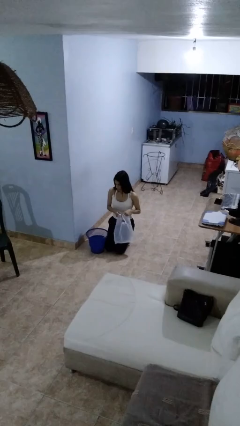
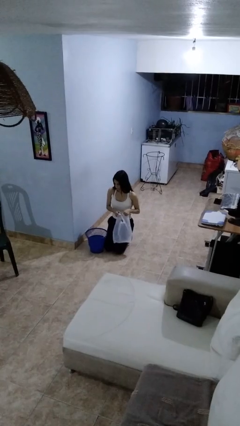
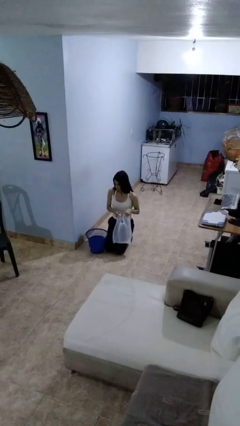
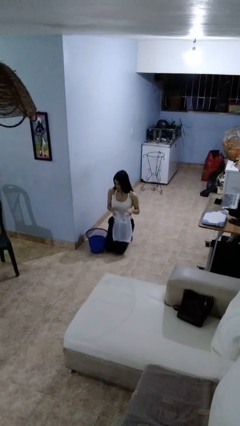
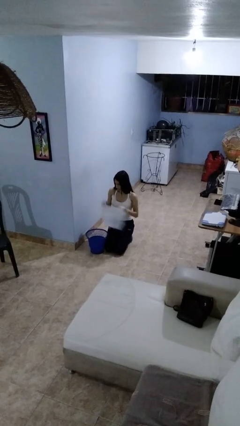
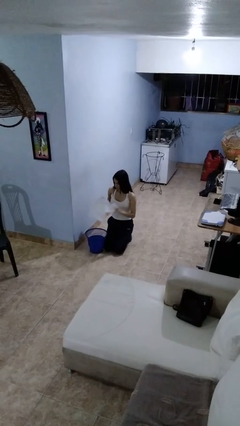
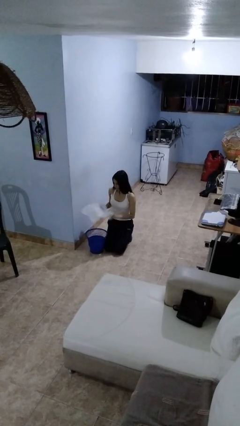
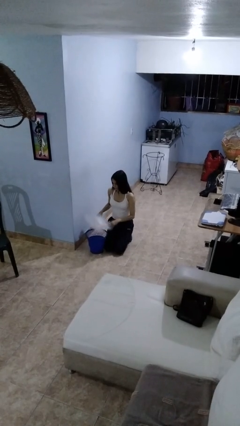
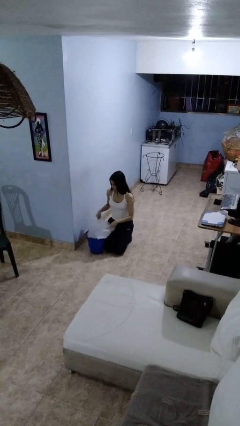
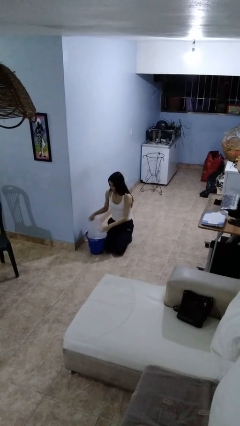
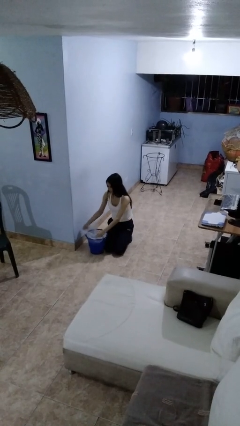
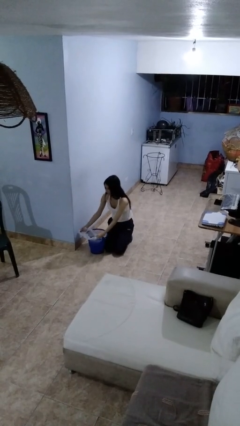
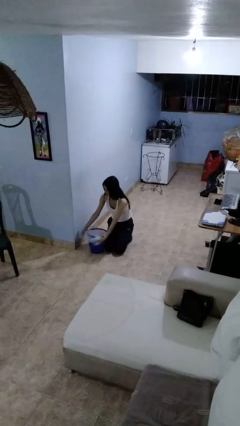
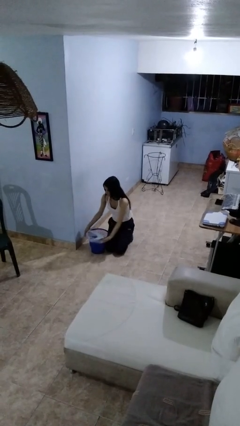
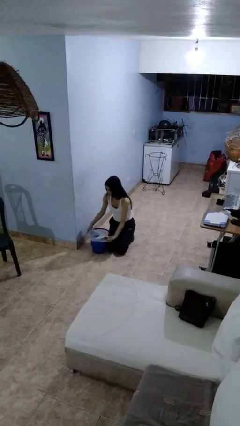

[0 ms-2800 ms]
person inserts trashbag into trashcan

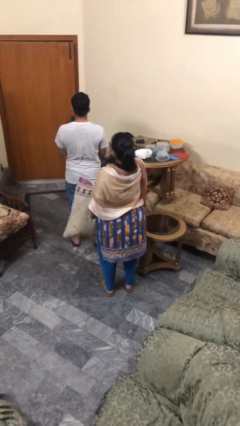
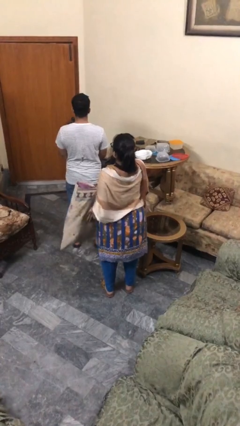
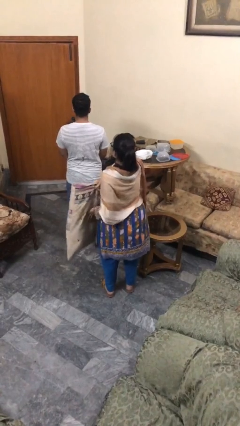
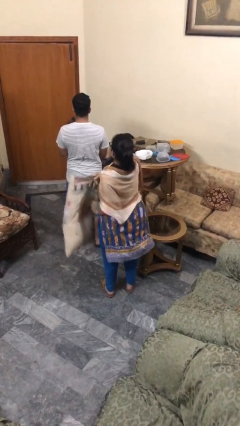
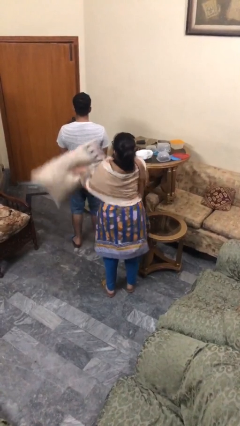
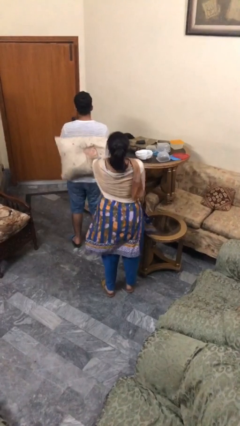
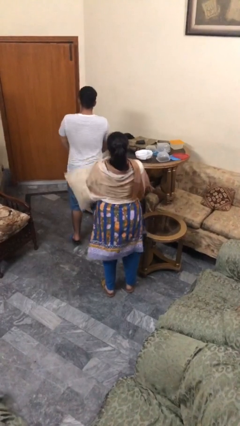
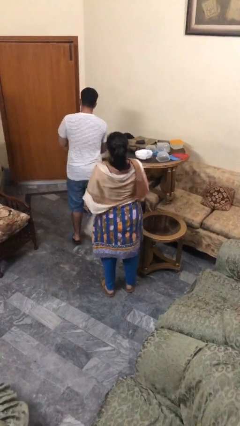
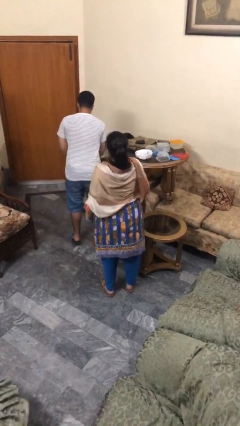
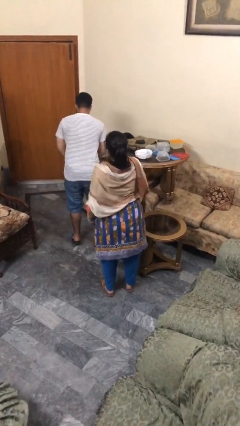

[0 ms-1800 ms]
person hits person with pillow

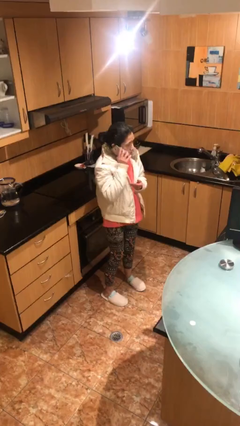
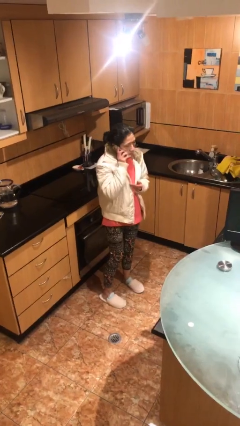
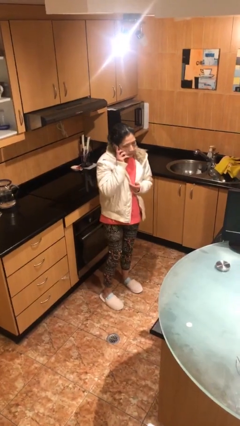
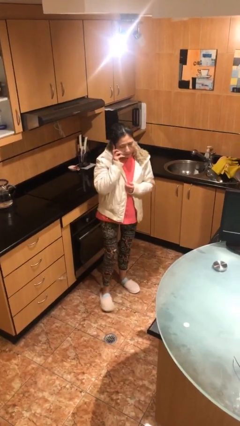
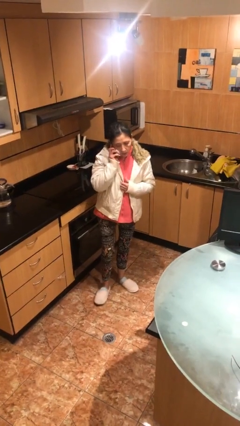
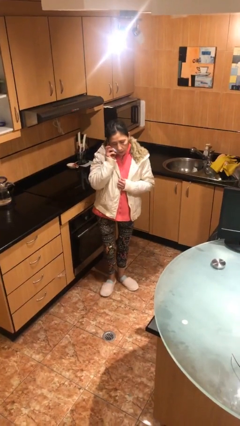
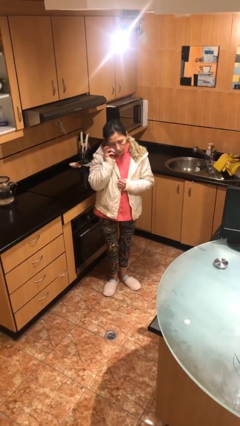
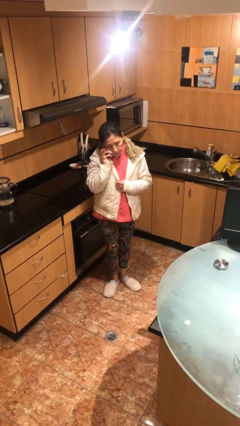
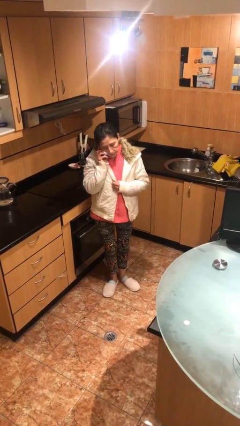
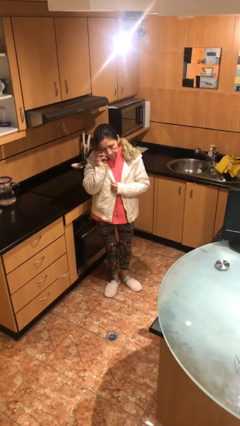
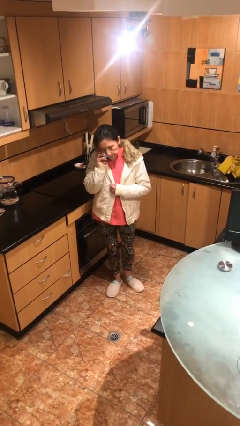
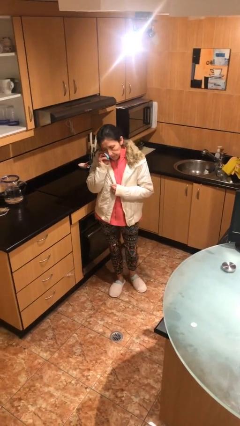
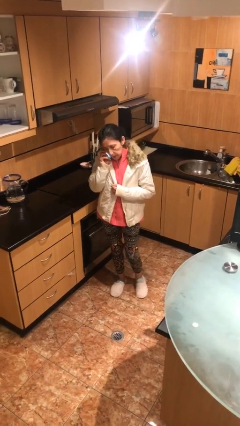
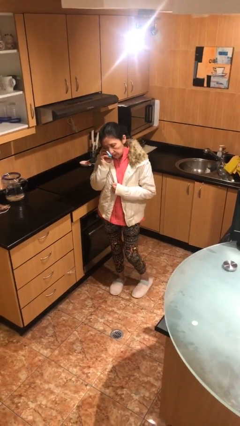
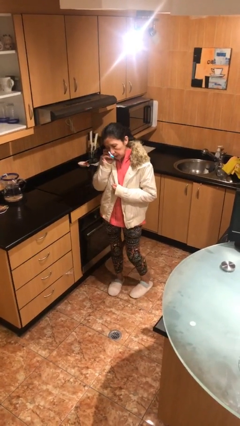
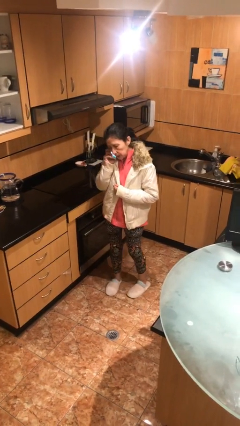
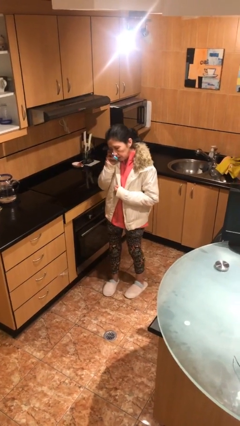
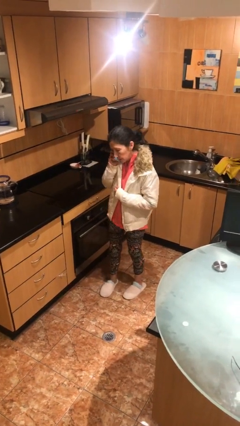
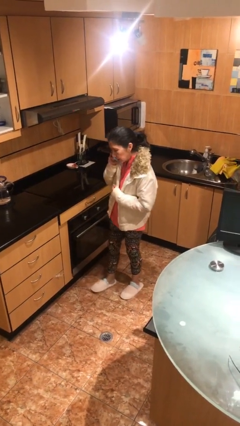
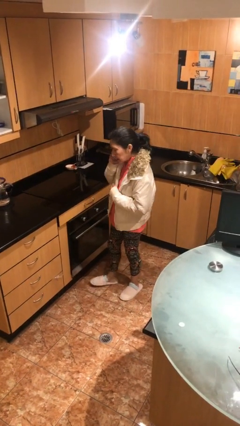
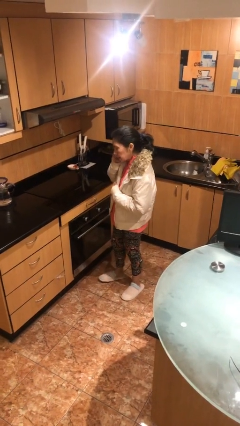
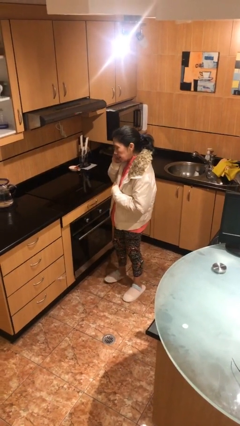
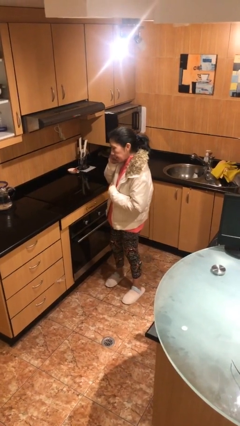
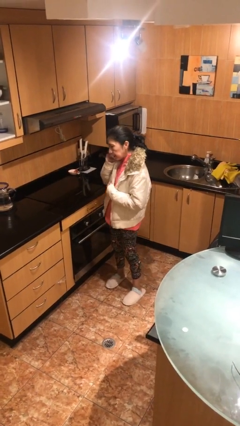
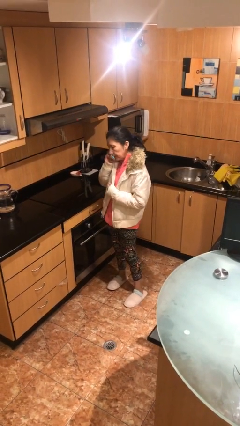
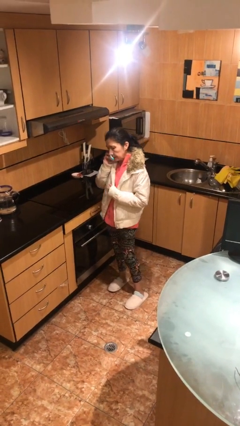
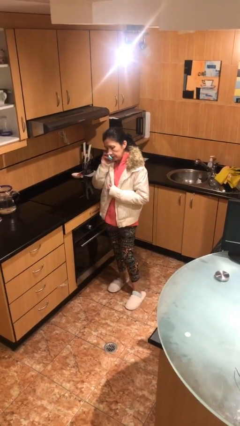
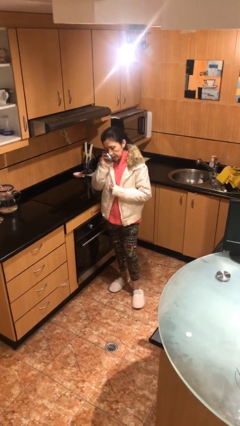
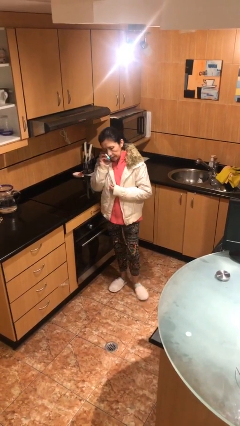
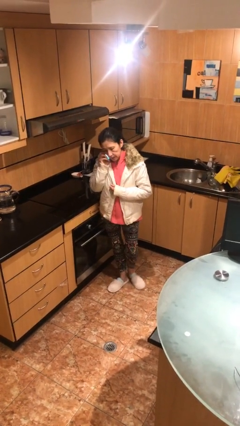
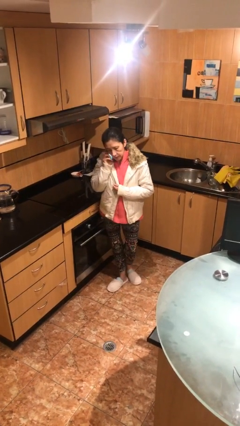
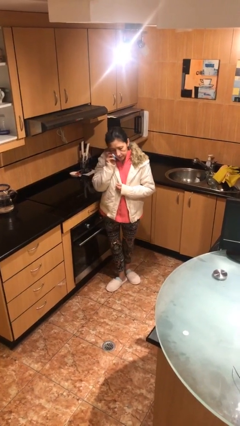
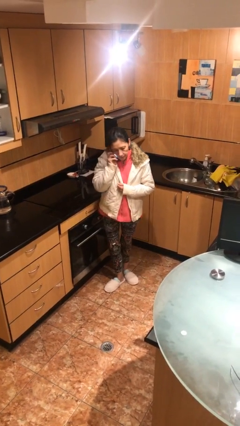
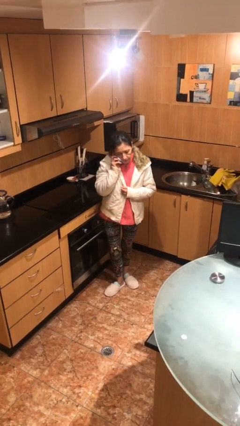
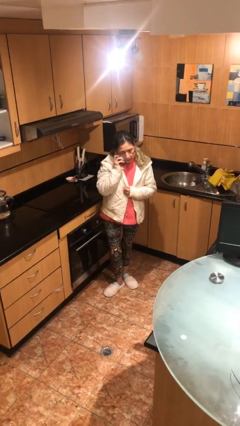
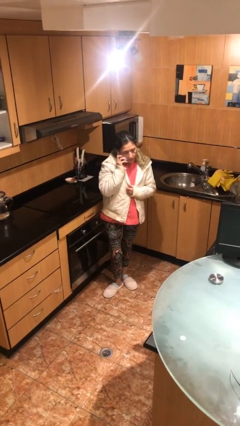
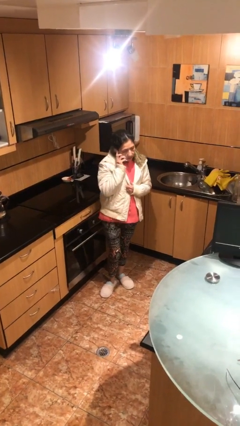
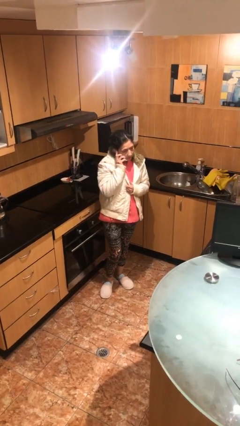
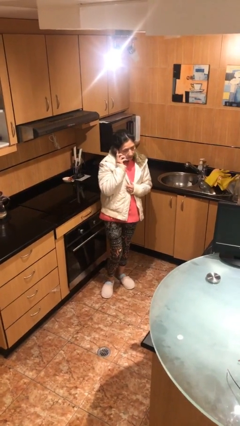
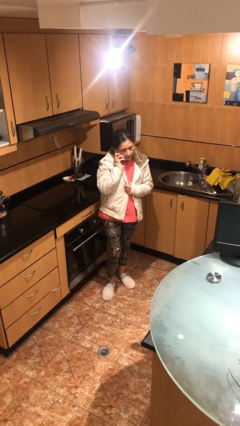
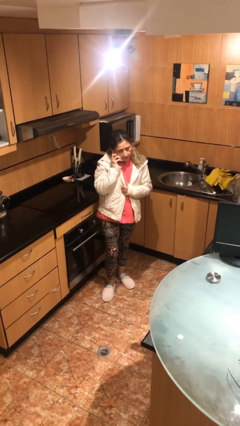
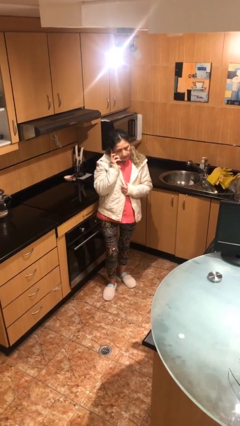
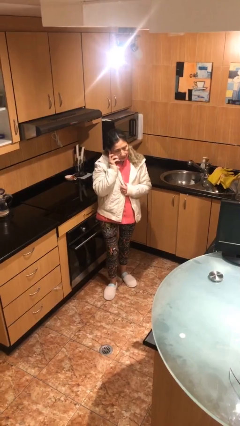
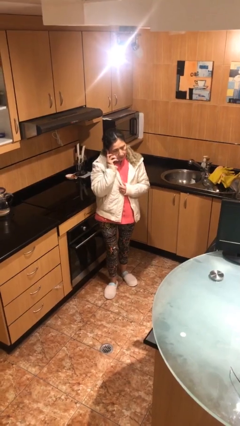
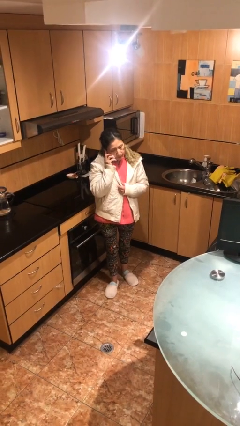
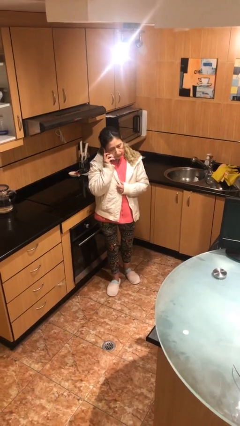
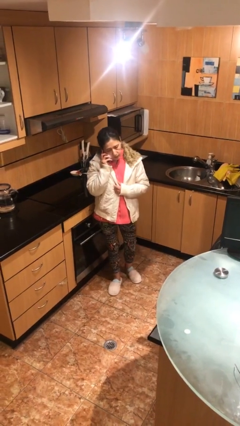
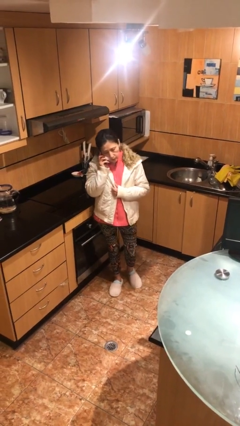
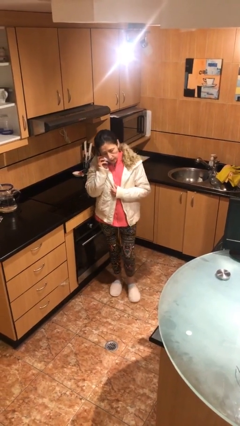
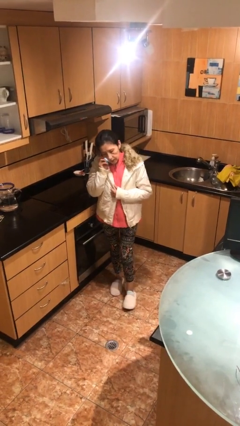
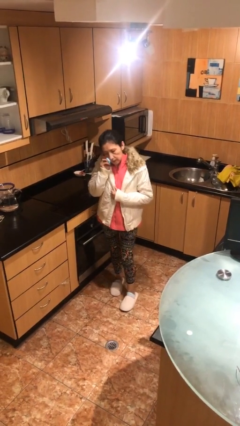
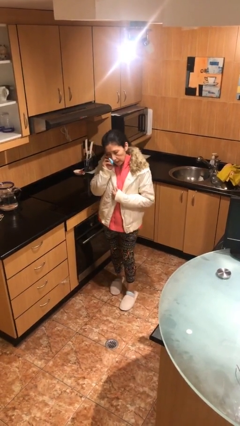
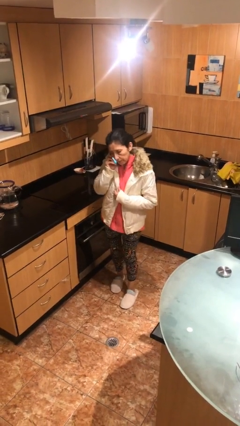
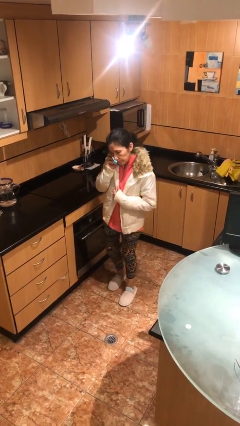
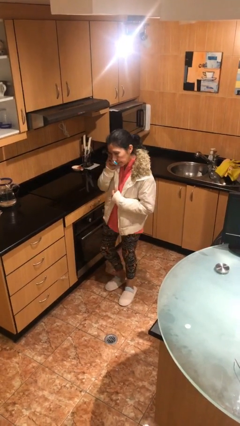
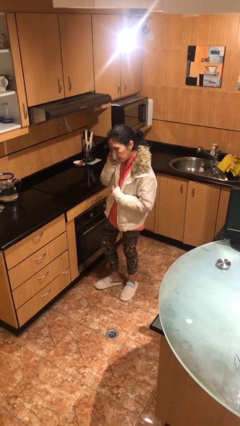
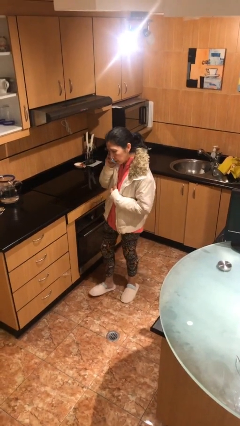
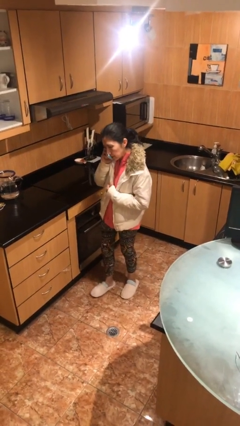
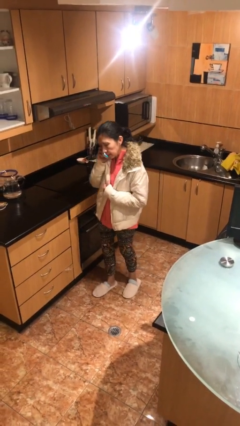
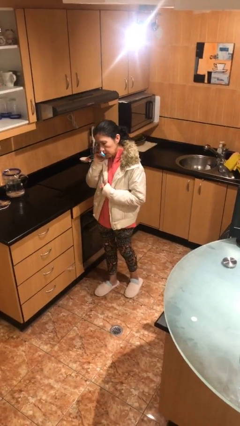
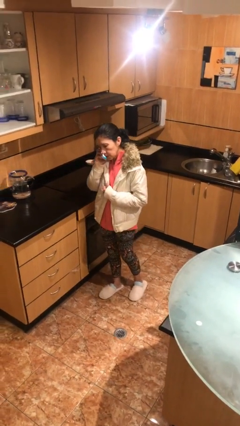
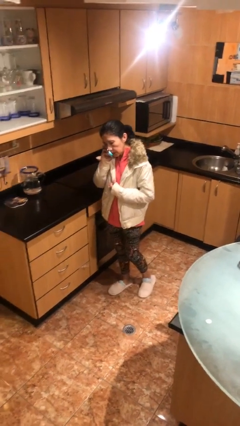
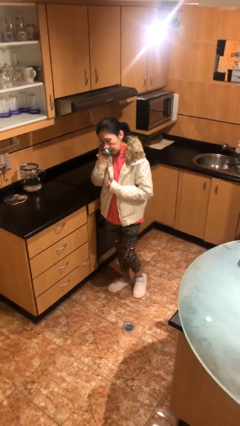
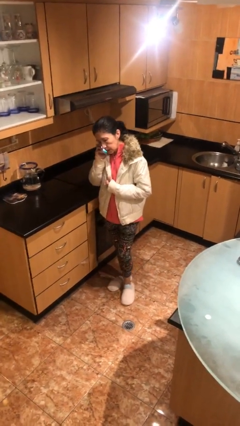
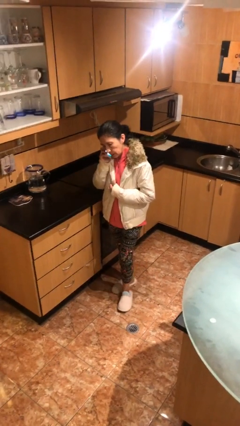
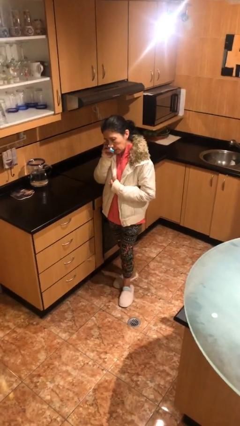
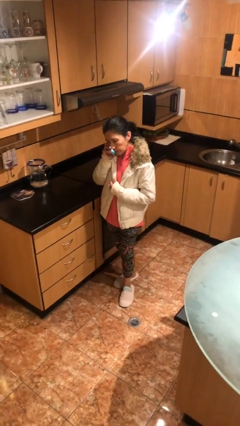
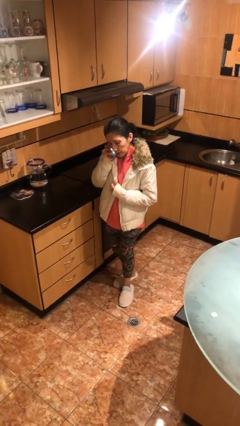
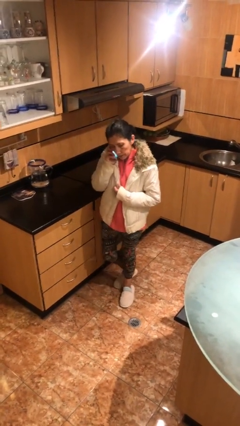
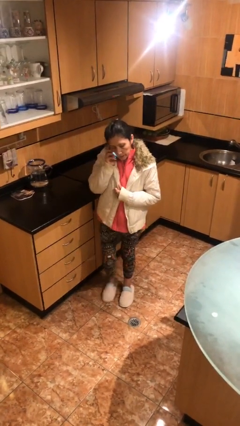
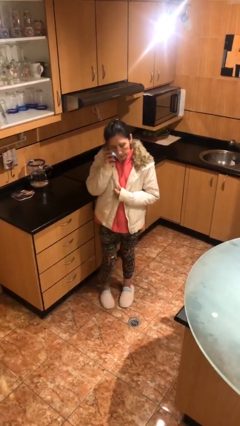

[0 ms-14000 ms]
person talks on phone
